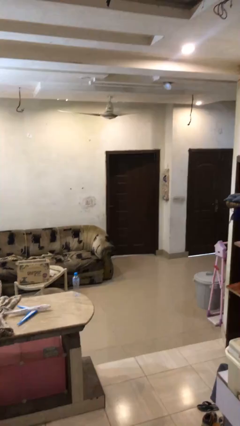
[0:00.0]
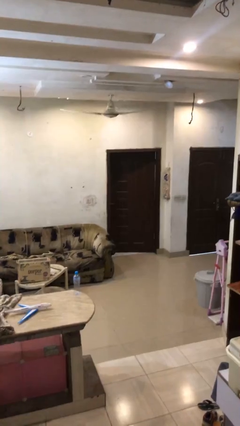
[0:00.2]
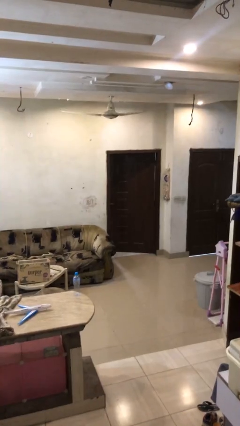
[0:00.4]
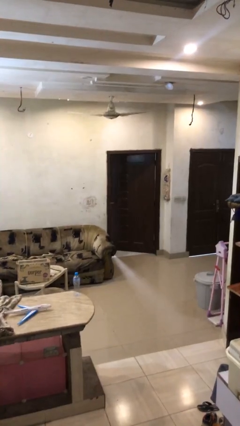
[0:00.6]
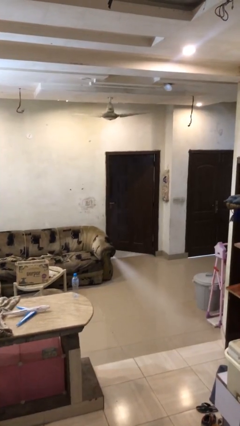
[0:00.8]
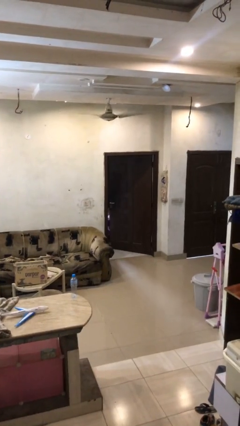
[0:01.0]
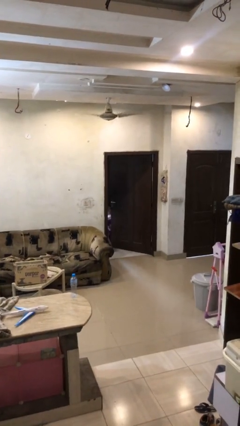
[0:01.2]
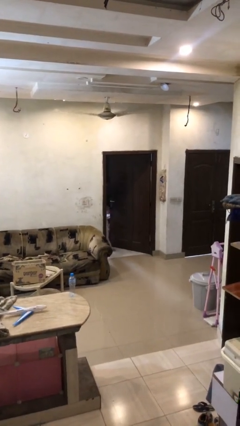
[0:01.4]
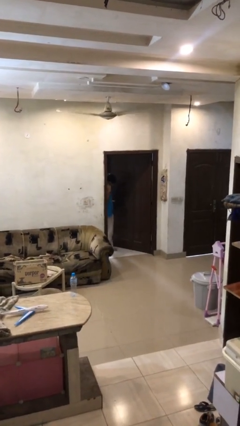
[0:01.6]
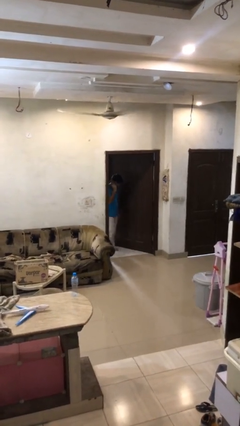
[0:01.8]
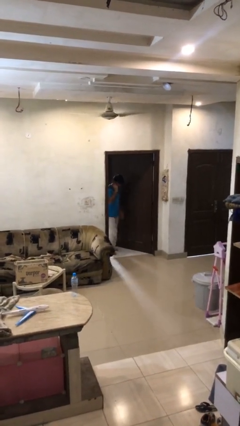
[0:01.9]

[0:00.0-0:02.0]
person opens facility door

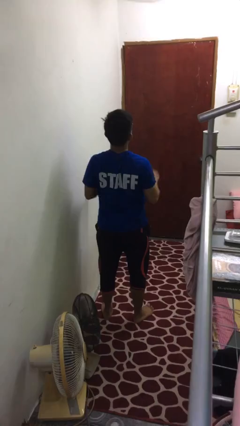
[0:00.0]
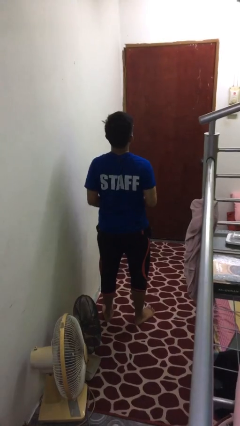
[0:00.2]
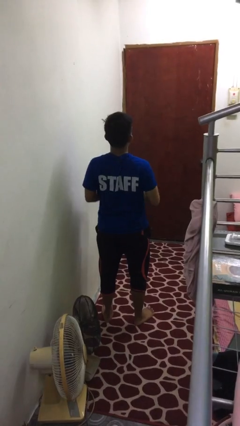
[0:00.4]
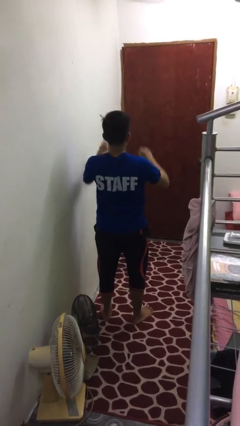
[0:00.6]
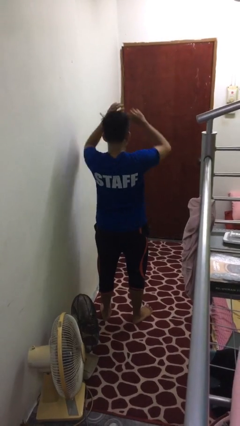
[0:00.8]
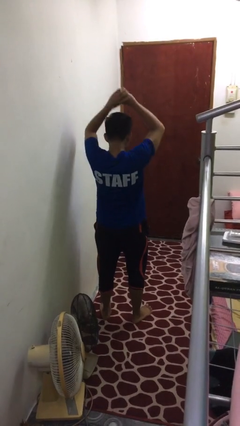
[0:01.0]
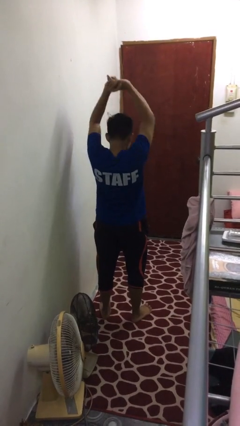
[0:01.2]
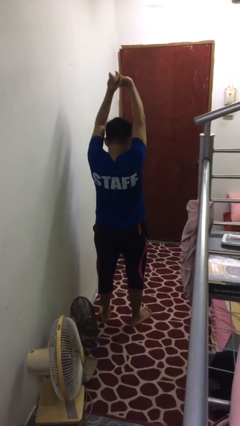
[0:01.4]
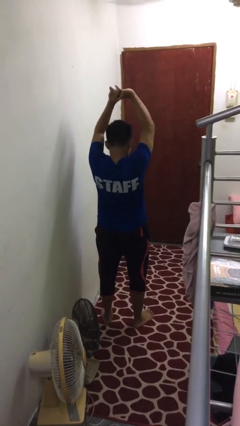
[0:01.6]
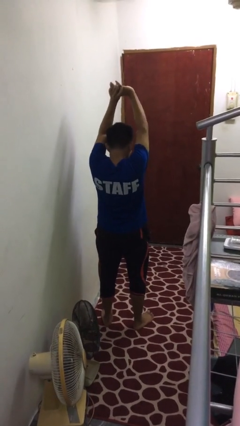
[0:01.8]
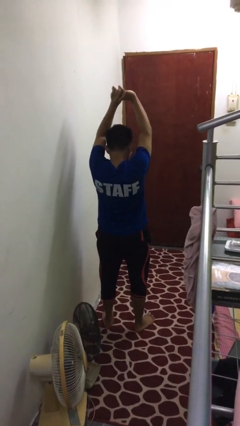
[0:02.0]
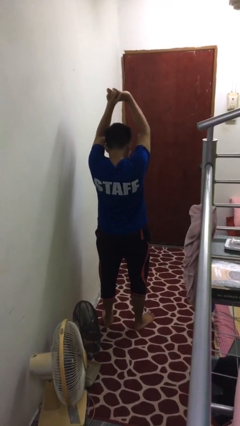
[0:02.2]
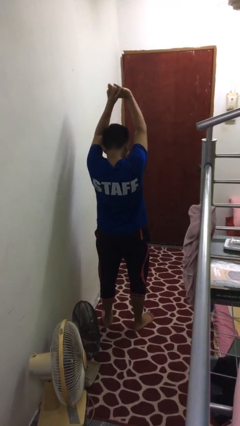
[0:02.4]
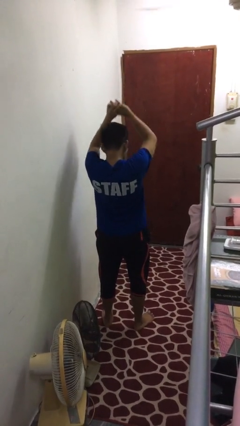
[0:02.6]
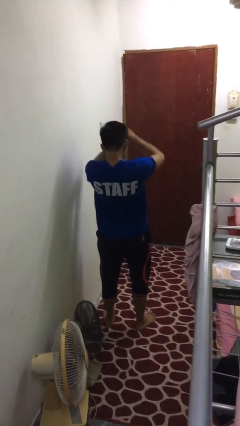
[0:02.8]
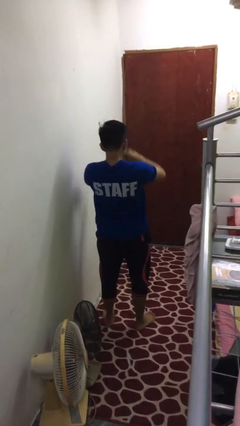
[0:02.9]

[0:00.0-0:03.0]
person stretches arms over head

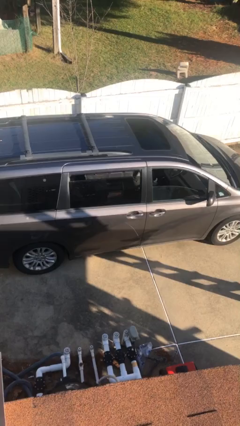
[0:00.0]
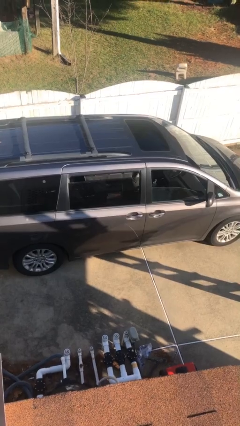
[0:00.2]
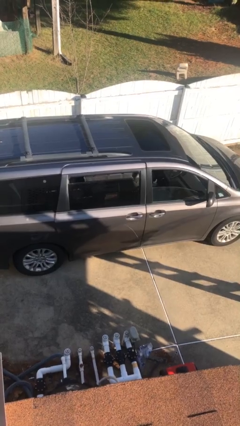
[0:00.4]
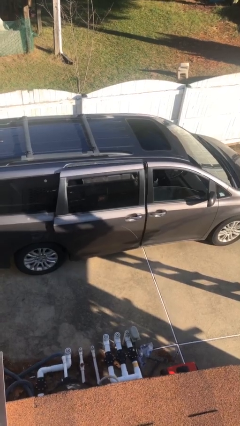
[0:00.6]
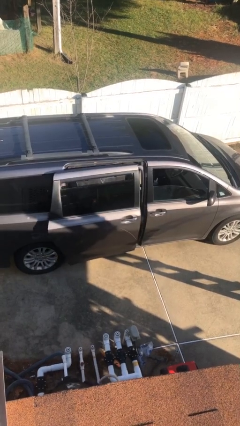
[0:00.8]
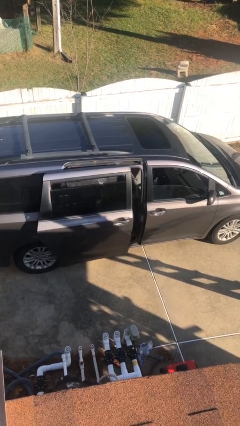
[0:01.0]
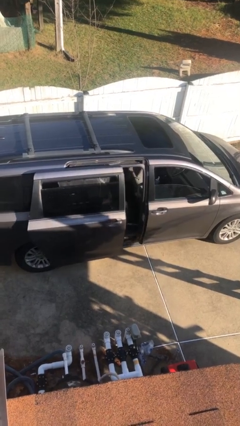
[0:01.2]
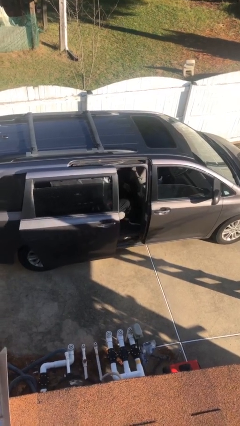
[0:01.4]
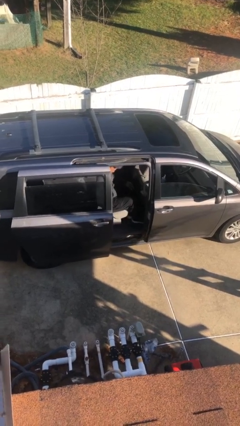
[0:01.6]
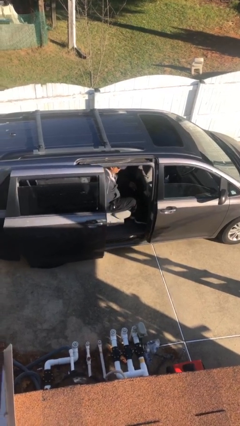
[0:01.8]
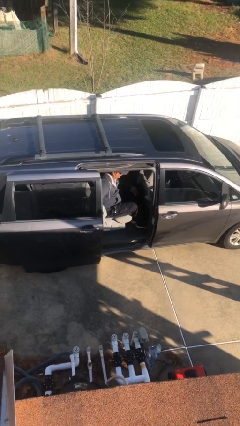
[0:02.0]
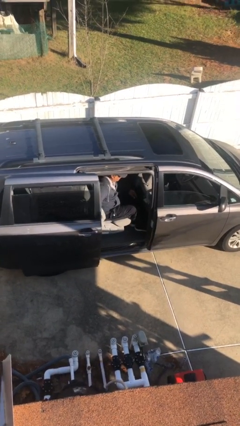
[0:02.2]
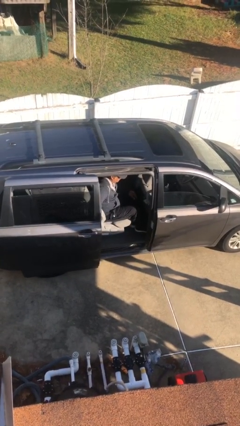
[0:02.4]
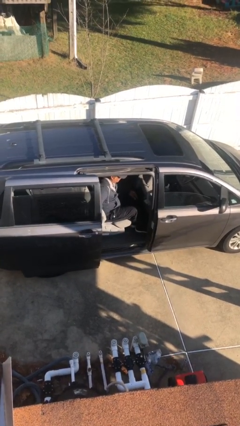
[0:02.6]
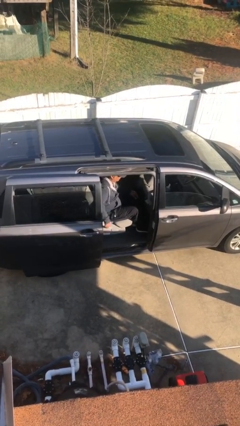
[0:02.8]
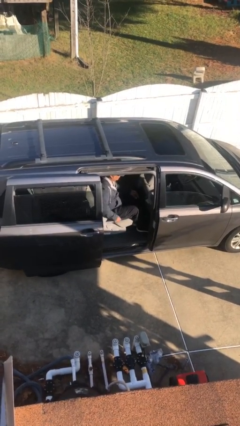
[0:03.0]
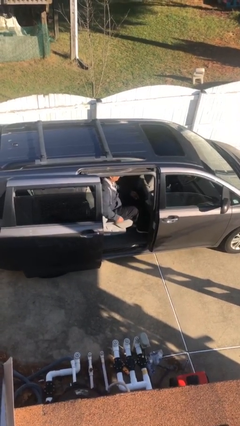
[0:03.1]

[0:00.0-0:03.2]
person opens car door

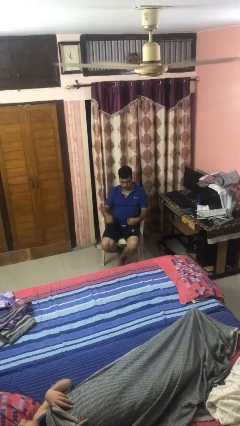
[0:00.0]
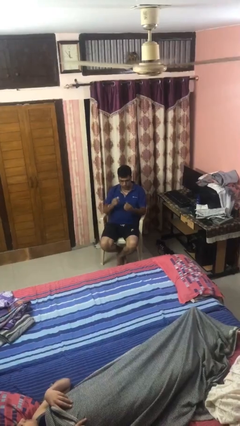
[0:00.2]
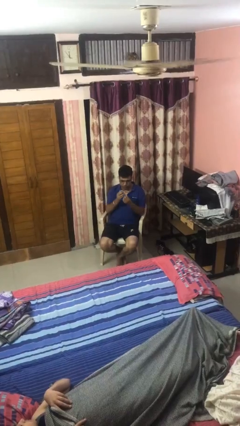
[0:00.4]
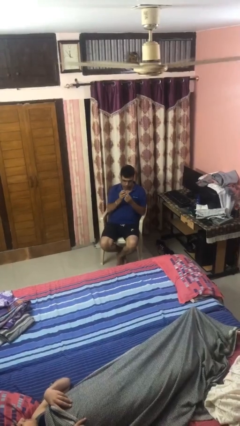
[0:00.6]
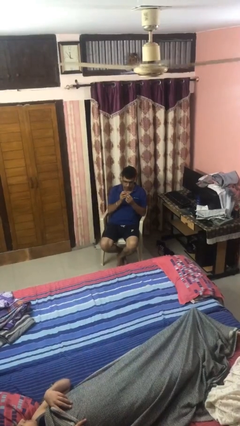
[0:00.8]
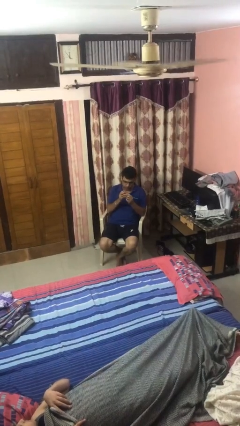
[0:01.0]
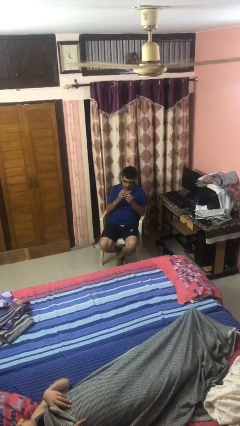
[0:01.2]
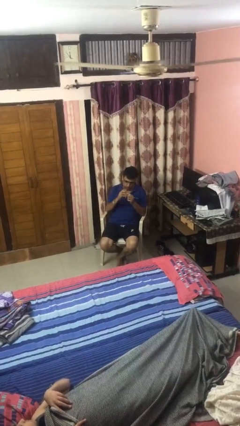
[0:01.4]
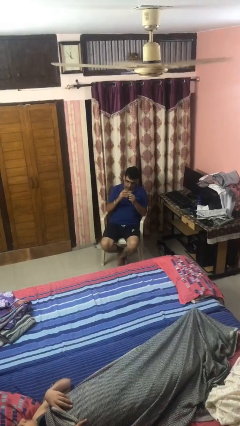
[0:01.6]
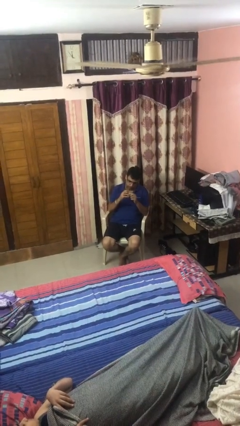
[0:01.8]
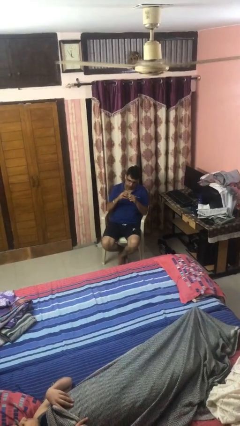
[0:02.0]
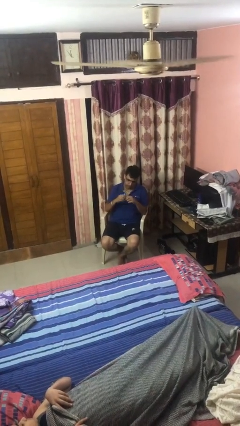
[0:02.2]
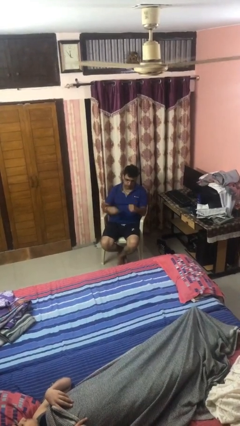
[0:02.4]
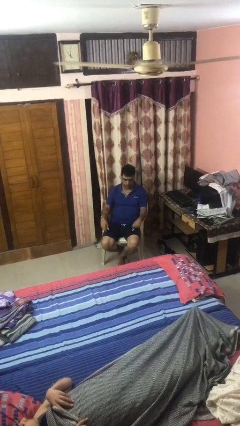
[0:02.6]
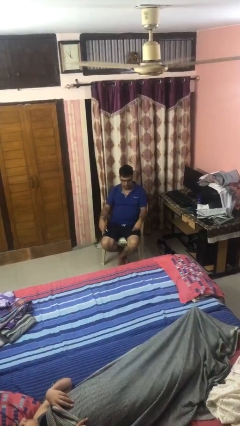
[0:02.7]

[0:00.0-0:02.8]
person clips fingernails

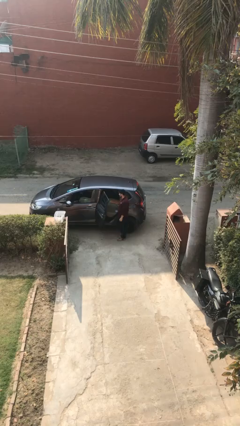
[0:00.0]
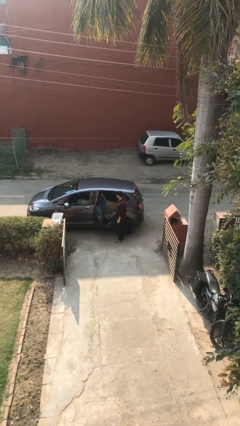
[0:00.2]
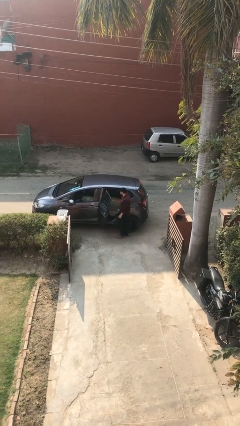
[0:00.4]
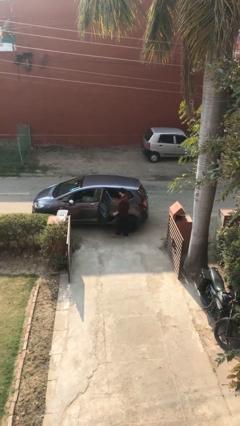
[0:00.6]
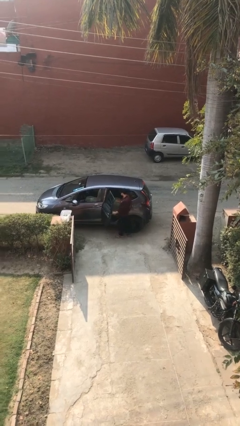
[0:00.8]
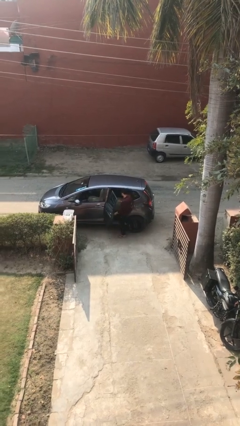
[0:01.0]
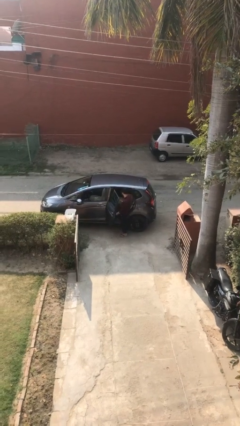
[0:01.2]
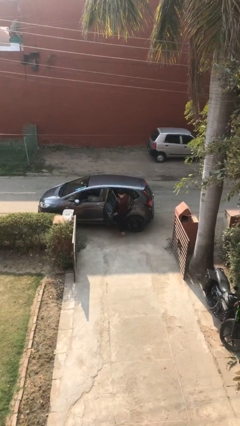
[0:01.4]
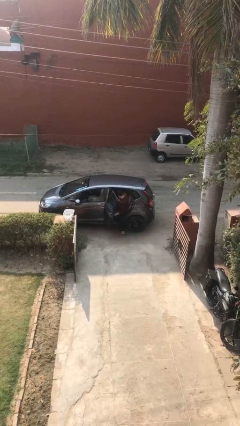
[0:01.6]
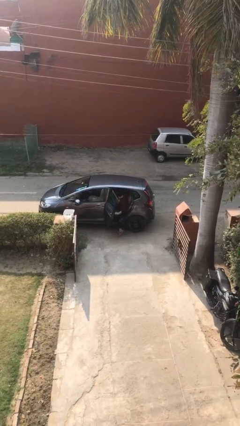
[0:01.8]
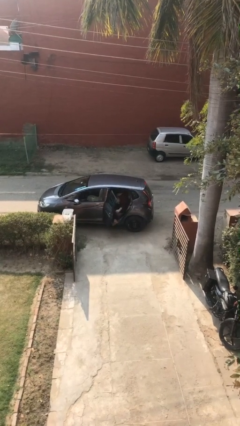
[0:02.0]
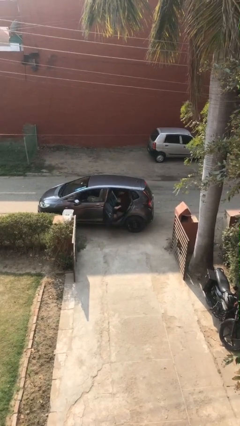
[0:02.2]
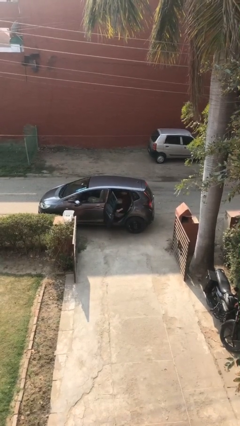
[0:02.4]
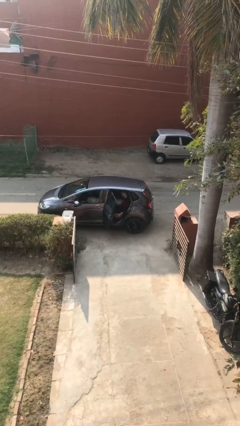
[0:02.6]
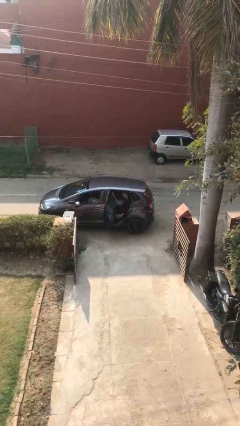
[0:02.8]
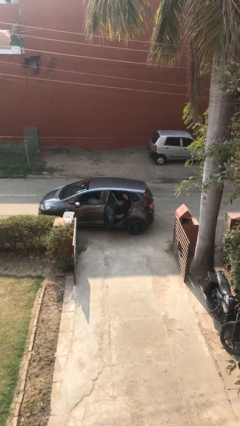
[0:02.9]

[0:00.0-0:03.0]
person enters car

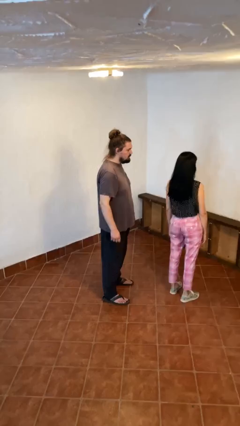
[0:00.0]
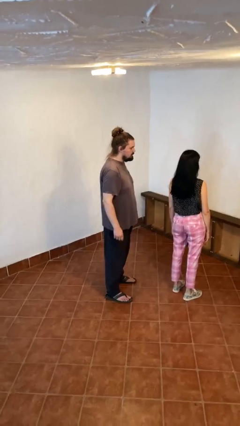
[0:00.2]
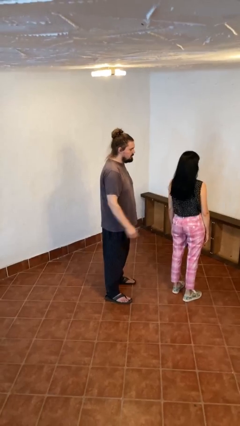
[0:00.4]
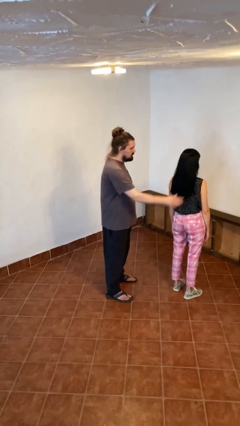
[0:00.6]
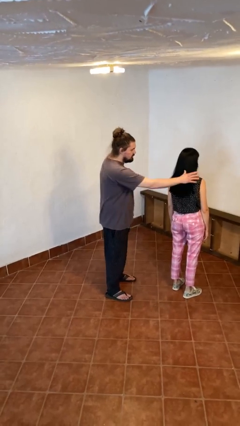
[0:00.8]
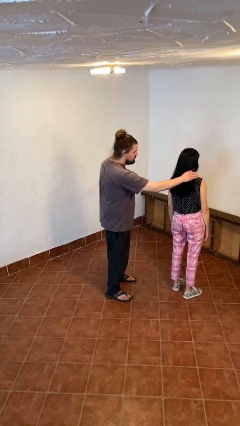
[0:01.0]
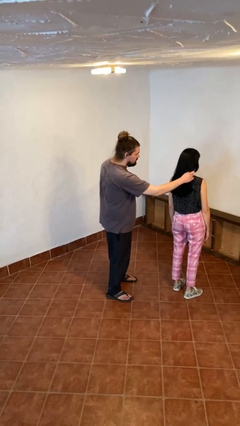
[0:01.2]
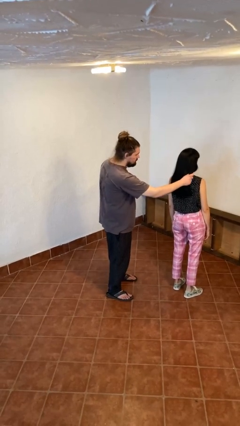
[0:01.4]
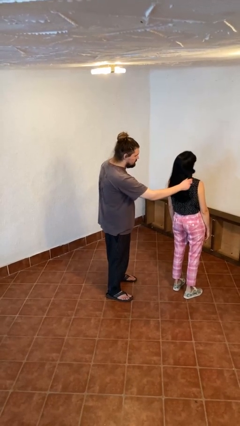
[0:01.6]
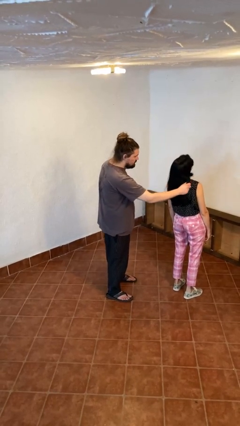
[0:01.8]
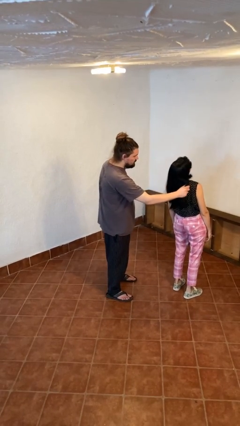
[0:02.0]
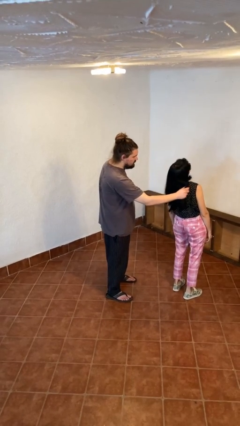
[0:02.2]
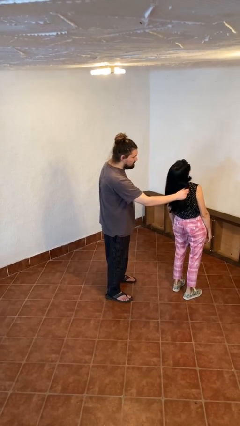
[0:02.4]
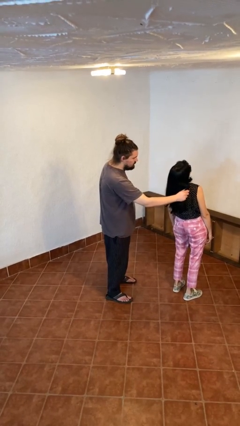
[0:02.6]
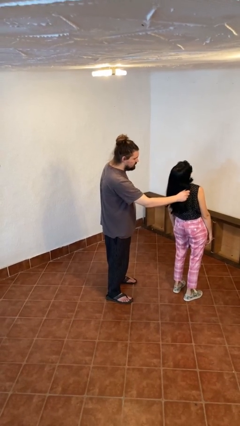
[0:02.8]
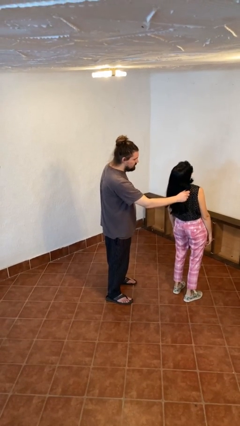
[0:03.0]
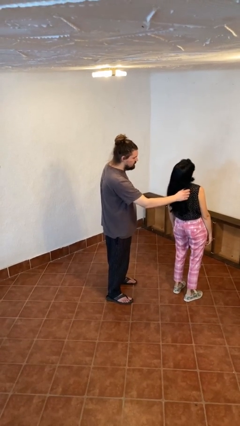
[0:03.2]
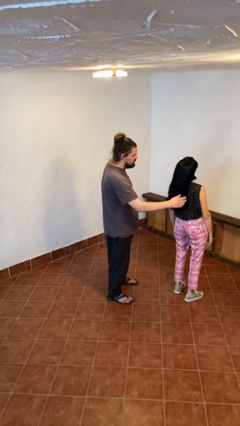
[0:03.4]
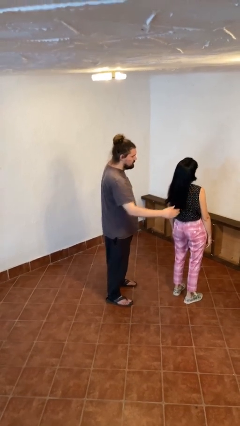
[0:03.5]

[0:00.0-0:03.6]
person grabs person by hair
